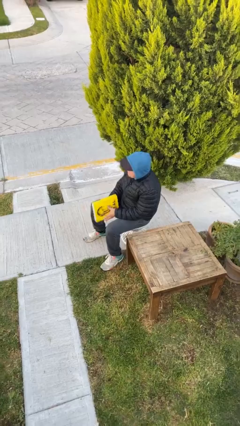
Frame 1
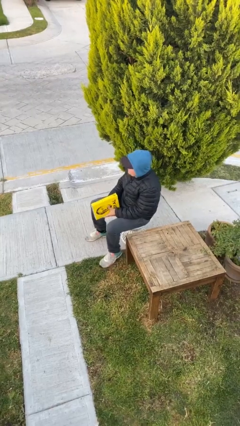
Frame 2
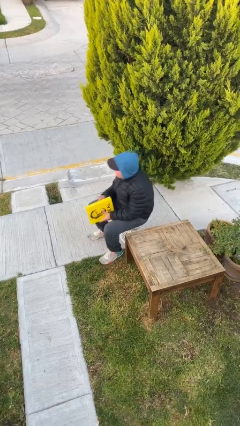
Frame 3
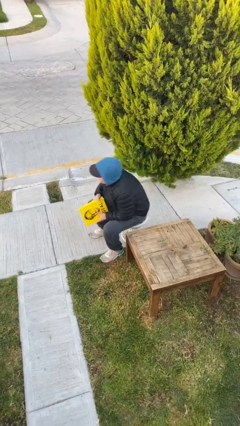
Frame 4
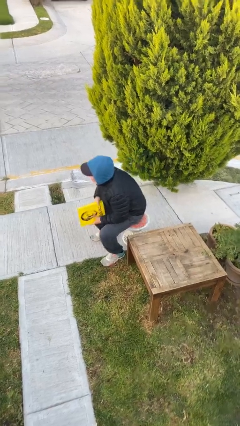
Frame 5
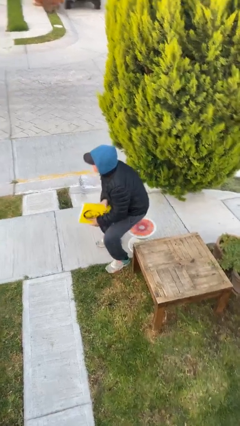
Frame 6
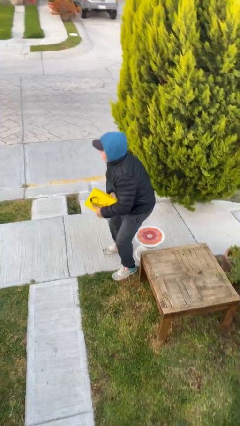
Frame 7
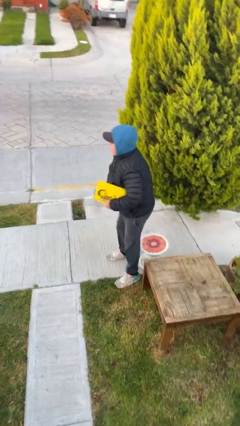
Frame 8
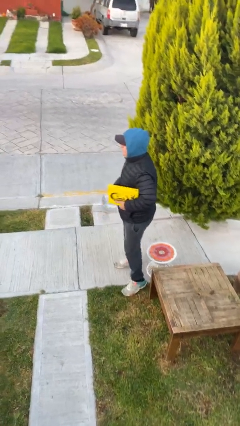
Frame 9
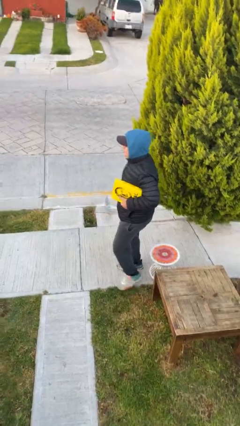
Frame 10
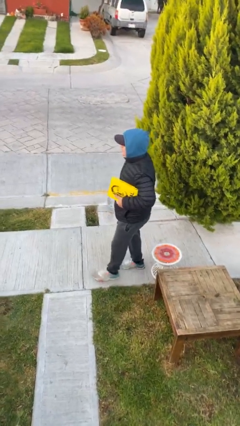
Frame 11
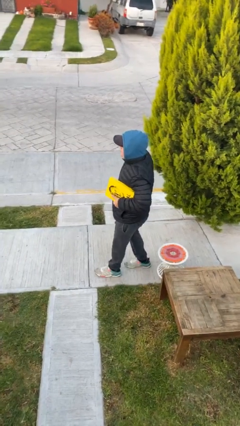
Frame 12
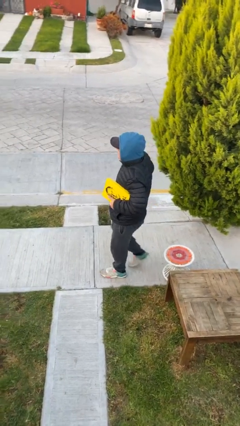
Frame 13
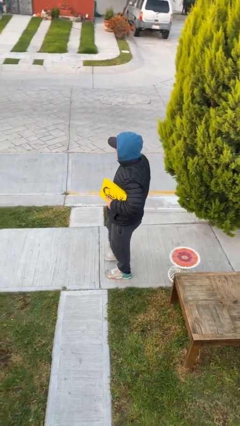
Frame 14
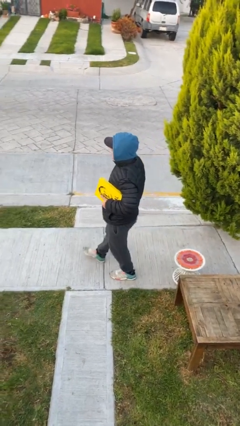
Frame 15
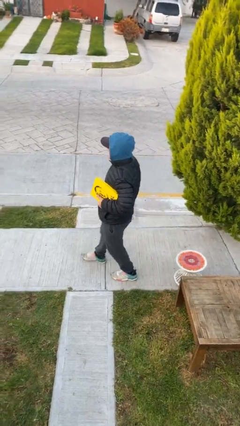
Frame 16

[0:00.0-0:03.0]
person stands up

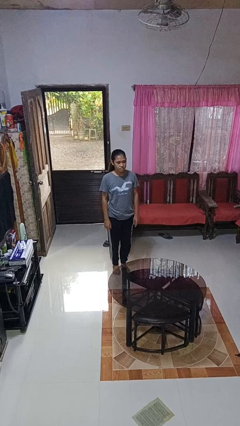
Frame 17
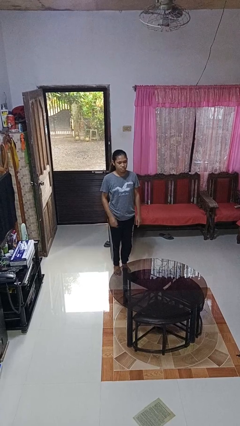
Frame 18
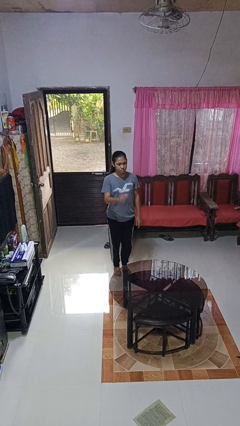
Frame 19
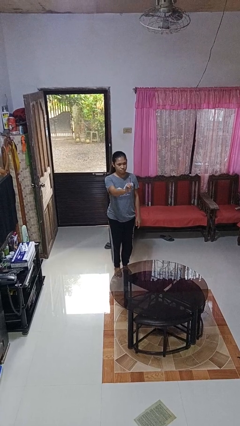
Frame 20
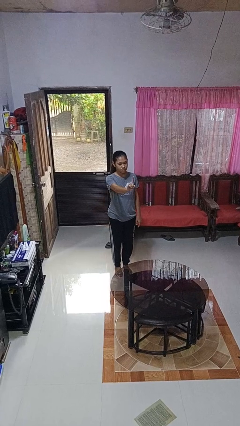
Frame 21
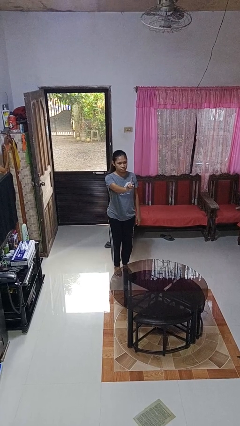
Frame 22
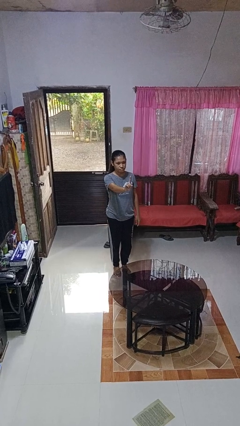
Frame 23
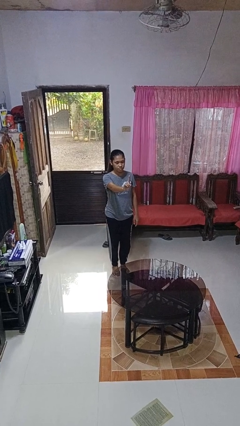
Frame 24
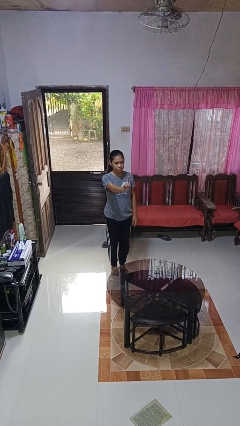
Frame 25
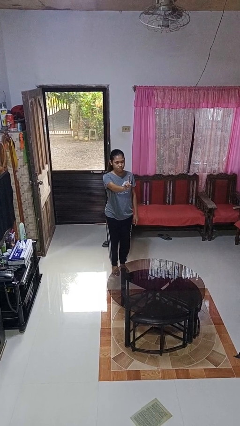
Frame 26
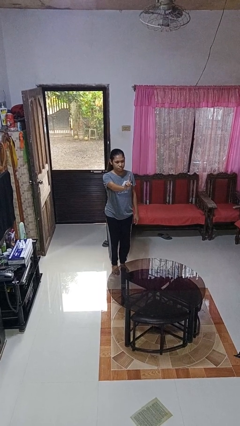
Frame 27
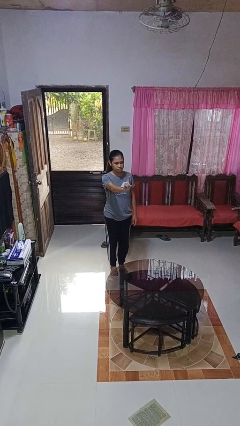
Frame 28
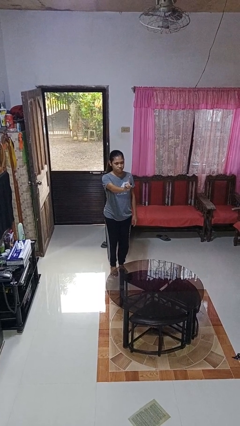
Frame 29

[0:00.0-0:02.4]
person gestures number one

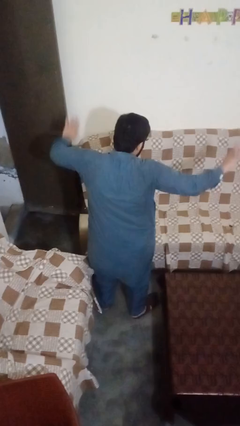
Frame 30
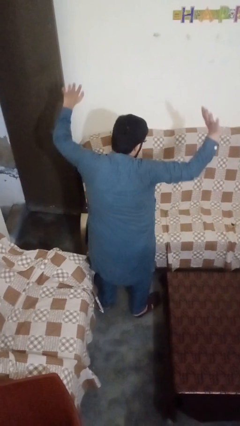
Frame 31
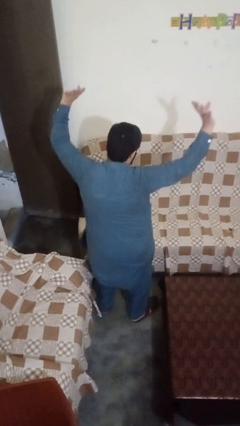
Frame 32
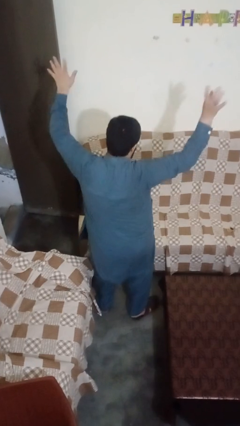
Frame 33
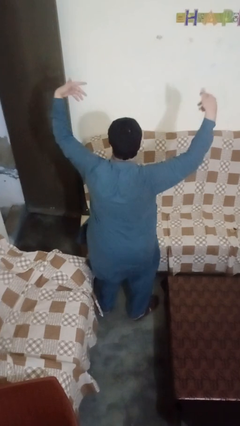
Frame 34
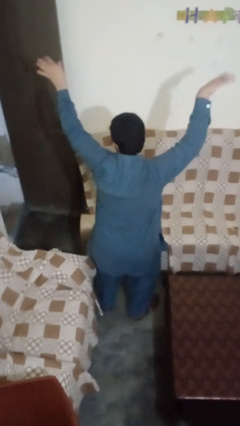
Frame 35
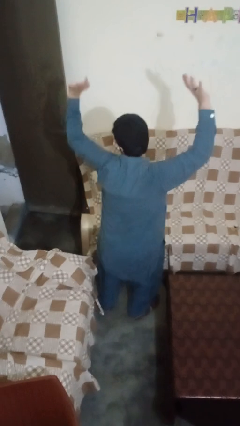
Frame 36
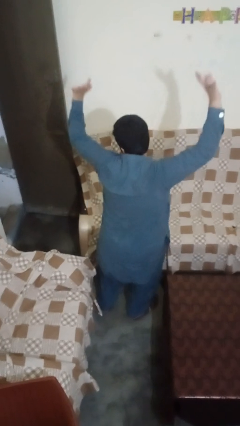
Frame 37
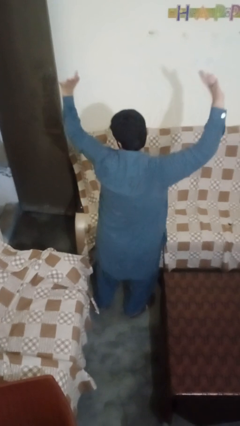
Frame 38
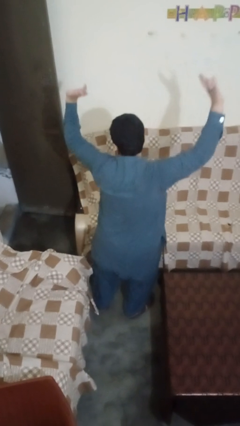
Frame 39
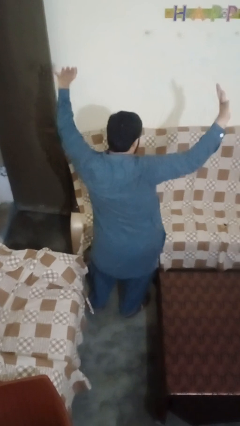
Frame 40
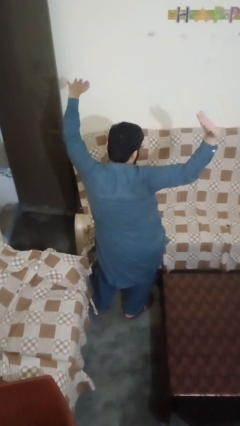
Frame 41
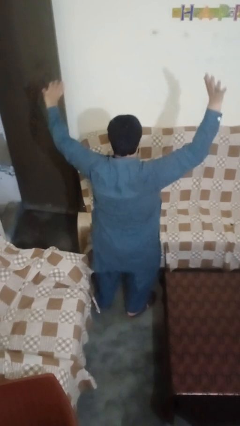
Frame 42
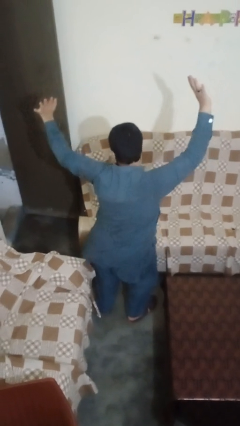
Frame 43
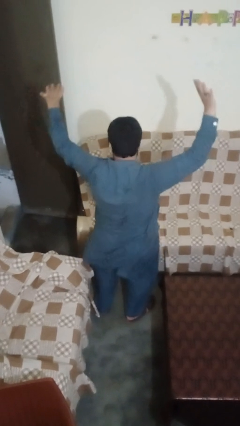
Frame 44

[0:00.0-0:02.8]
person dances in place

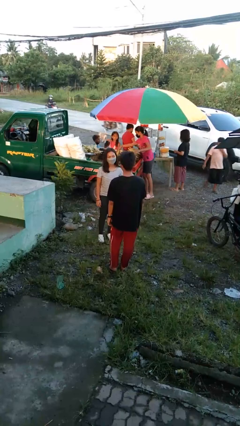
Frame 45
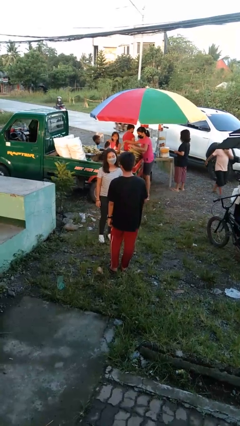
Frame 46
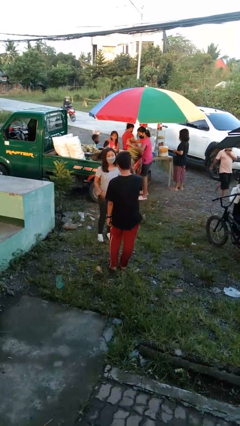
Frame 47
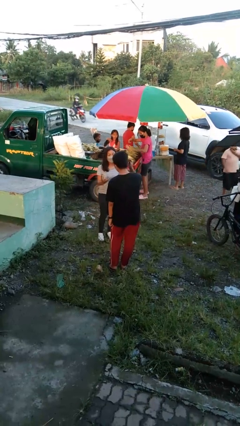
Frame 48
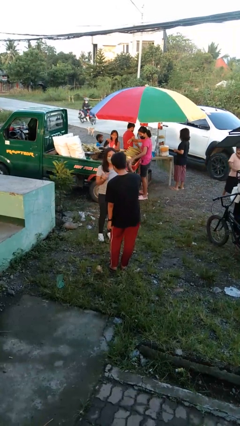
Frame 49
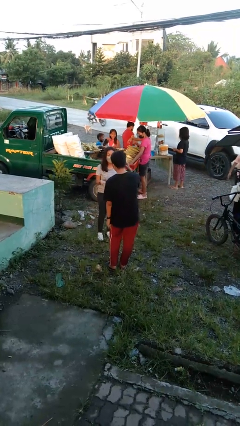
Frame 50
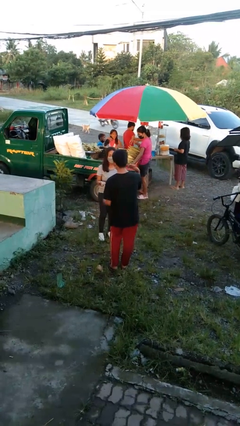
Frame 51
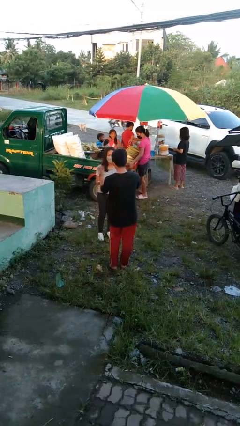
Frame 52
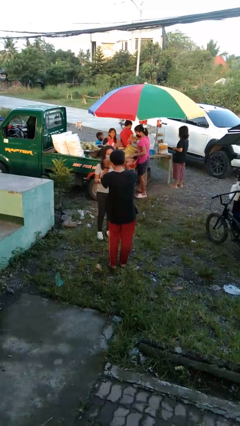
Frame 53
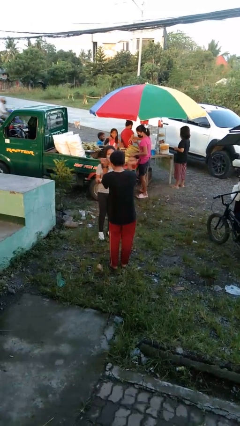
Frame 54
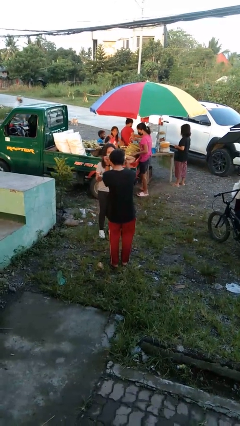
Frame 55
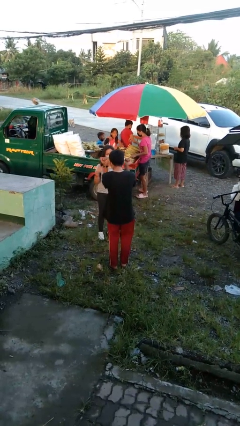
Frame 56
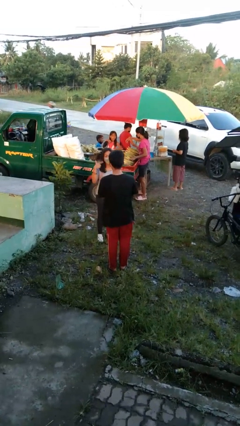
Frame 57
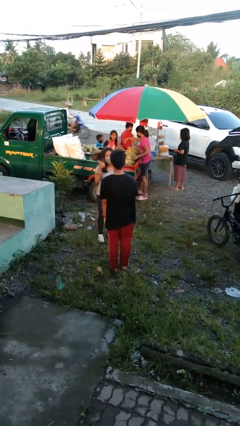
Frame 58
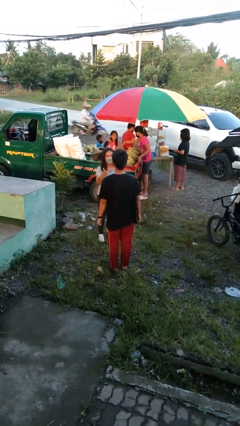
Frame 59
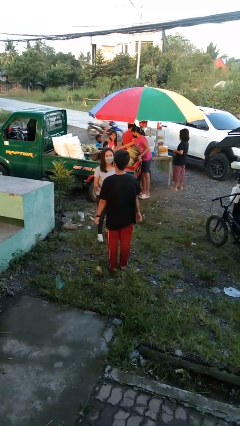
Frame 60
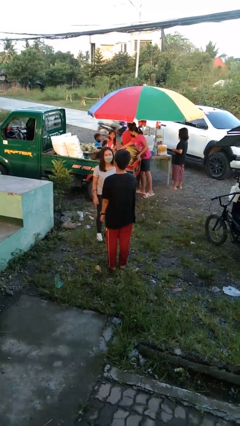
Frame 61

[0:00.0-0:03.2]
person talks to person

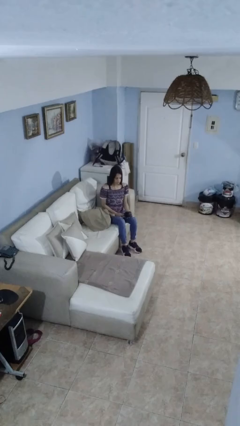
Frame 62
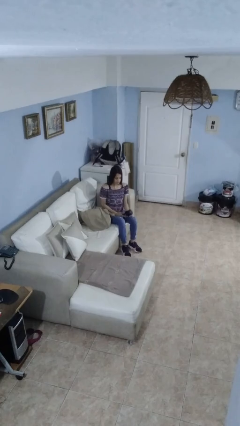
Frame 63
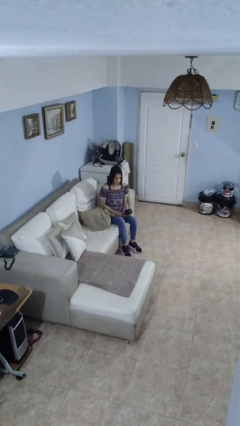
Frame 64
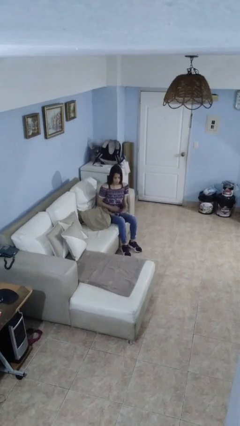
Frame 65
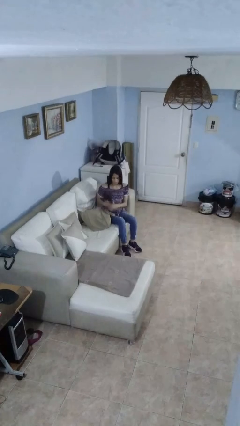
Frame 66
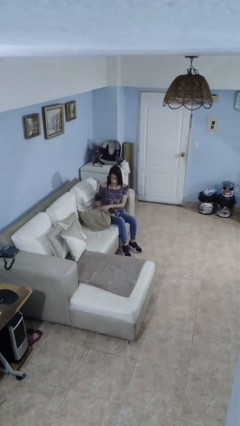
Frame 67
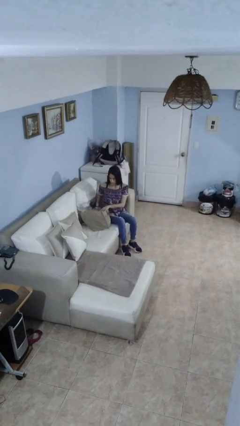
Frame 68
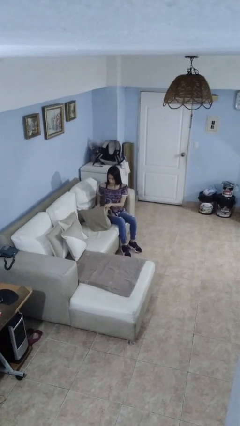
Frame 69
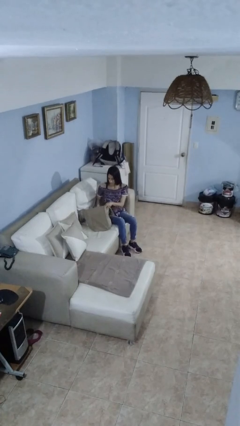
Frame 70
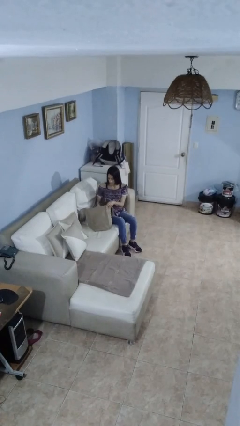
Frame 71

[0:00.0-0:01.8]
person puts object into bag

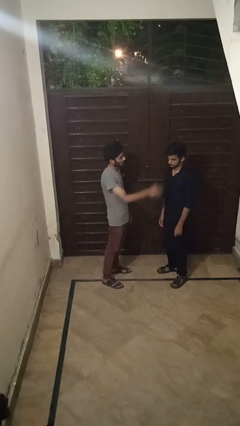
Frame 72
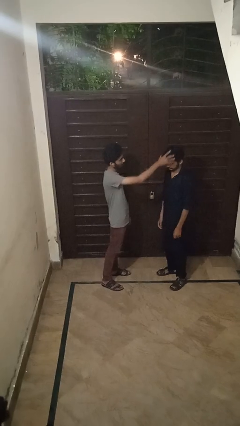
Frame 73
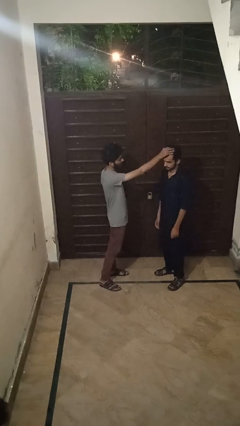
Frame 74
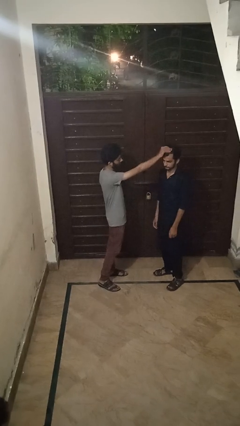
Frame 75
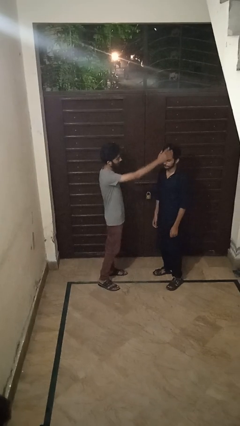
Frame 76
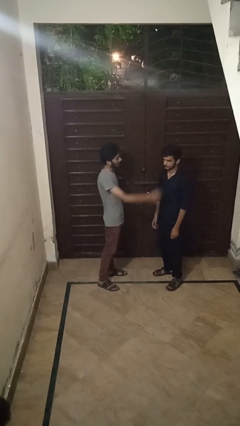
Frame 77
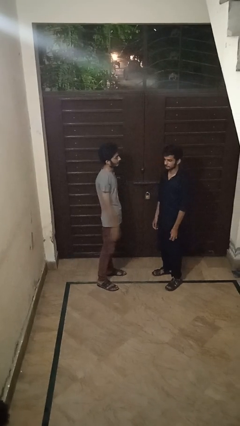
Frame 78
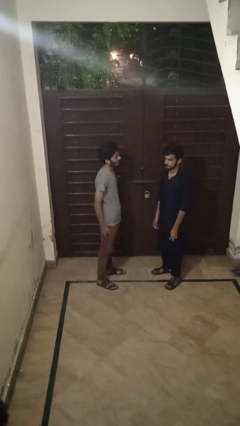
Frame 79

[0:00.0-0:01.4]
person grabs person by hair

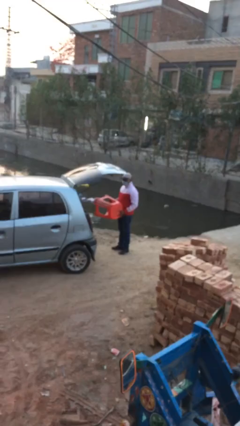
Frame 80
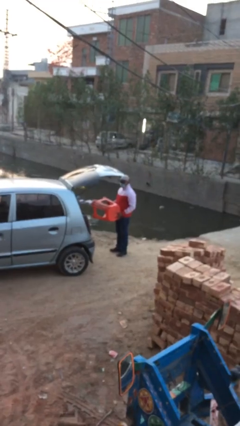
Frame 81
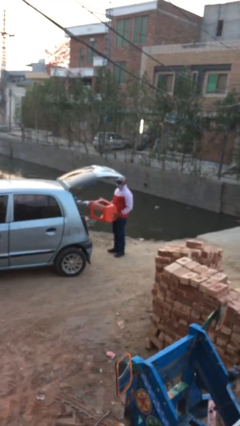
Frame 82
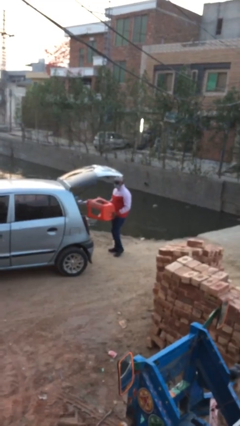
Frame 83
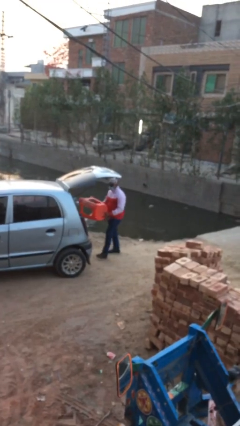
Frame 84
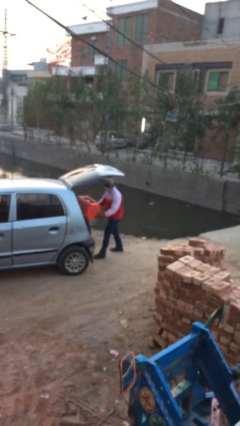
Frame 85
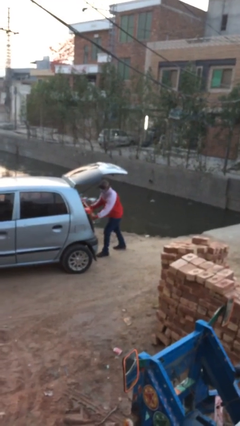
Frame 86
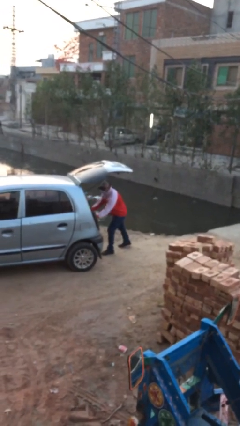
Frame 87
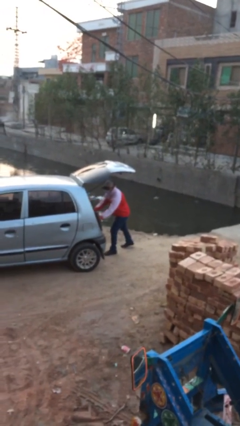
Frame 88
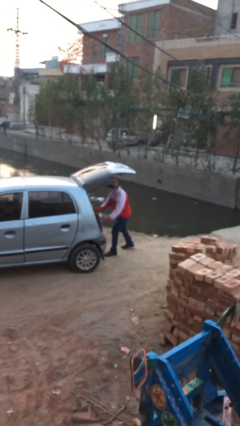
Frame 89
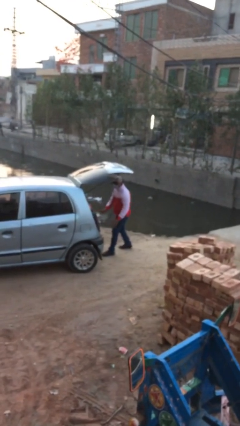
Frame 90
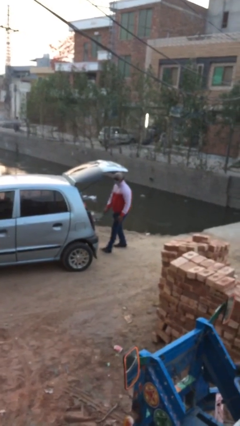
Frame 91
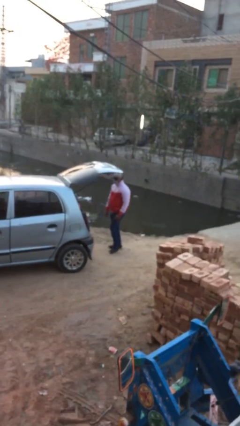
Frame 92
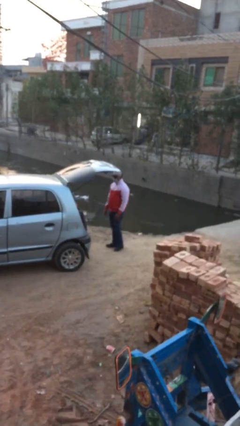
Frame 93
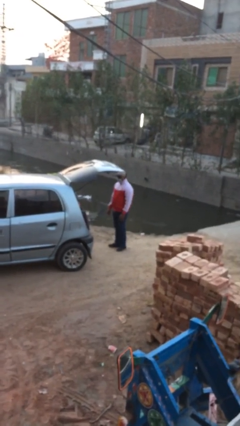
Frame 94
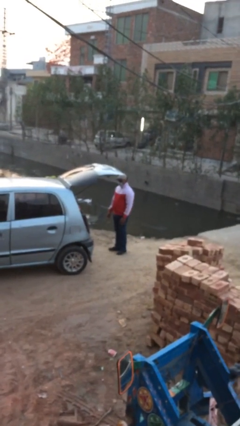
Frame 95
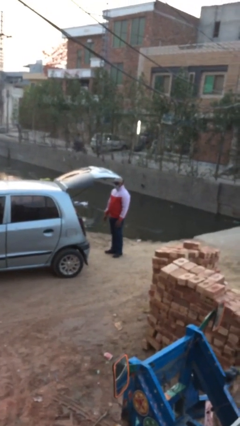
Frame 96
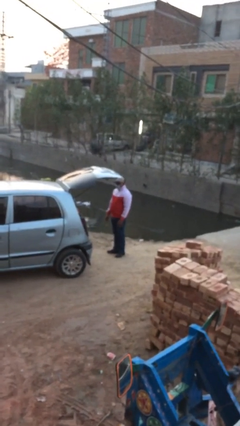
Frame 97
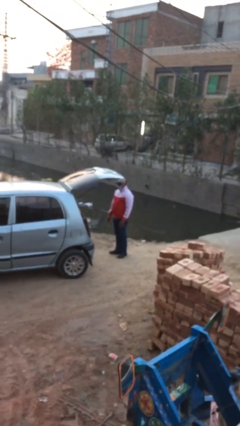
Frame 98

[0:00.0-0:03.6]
person loads car
